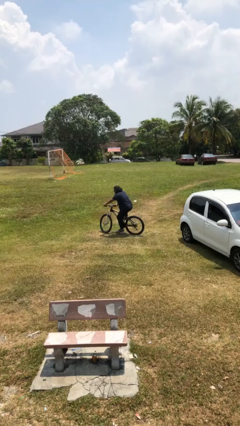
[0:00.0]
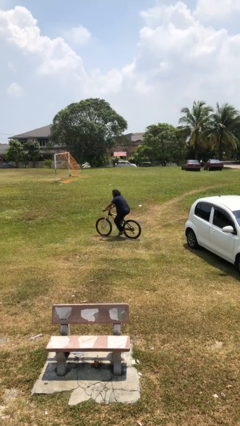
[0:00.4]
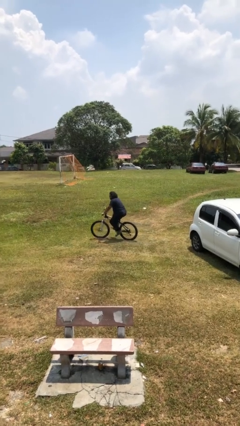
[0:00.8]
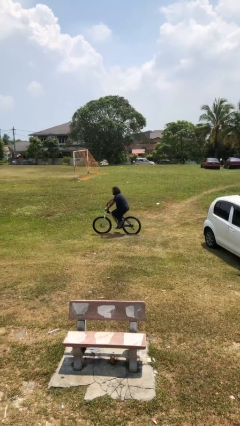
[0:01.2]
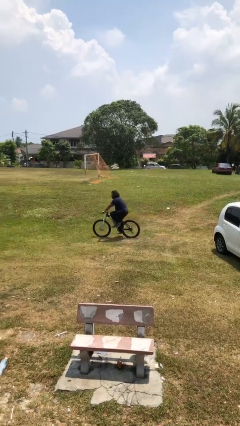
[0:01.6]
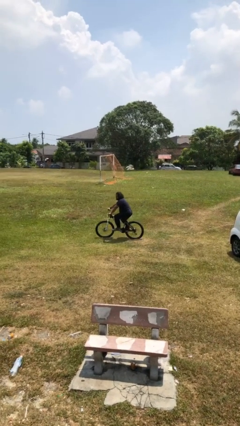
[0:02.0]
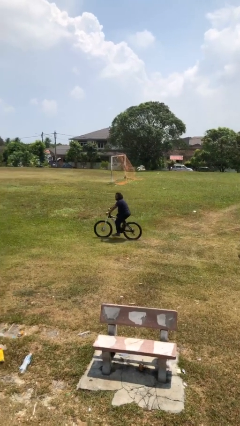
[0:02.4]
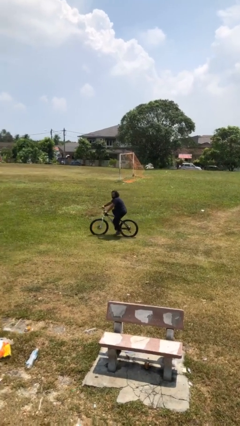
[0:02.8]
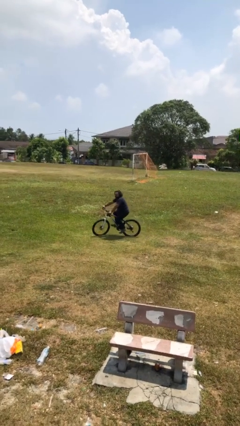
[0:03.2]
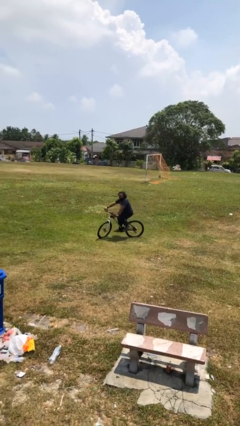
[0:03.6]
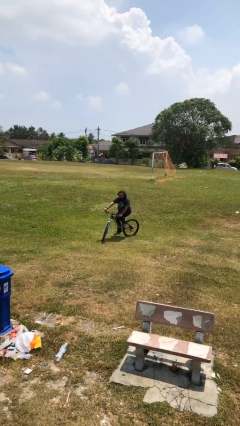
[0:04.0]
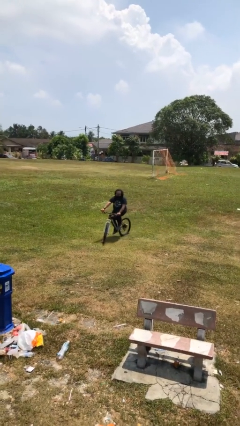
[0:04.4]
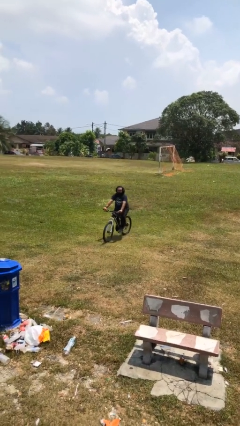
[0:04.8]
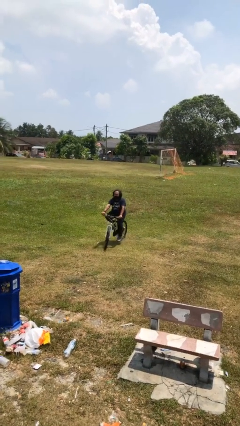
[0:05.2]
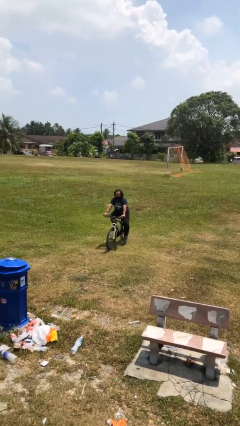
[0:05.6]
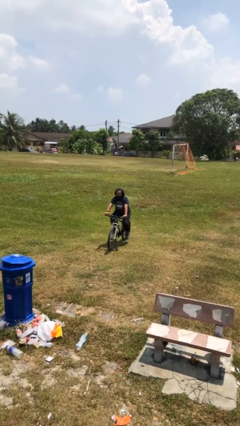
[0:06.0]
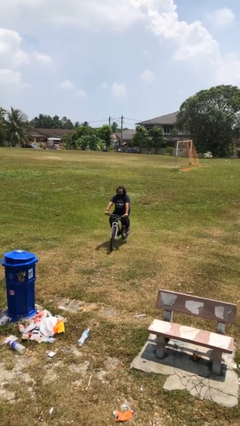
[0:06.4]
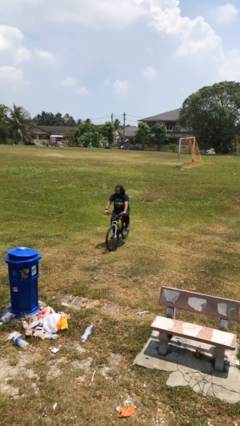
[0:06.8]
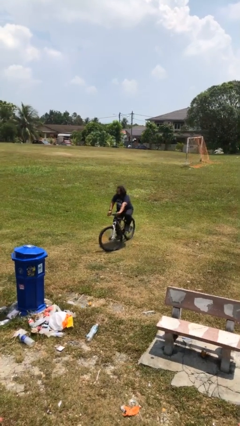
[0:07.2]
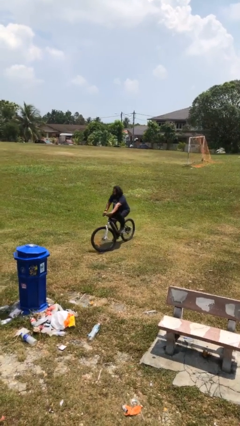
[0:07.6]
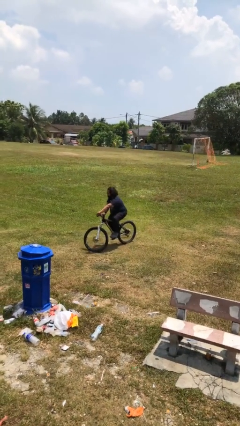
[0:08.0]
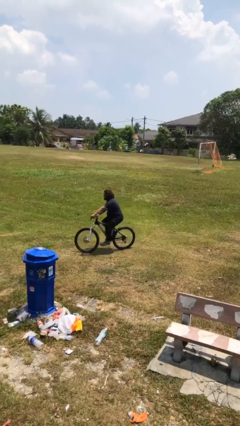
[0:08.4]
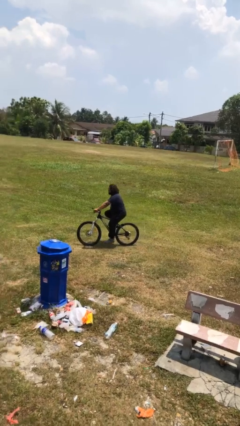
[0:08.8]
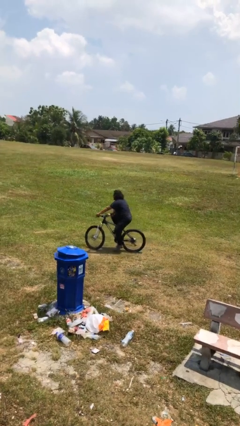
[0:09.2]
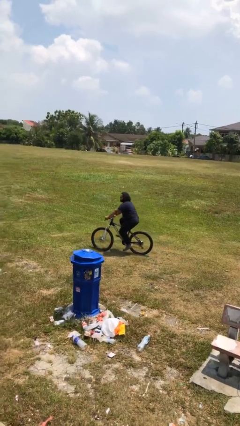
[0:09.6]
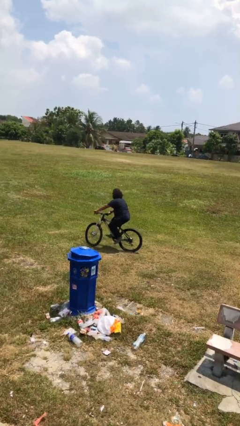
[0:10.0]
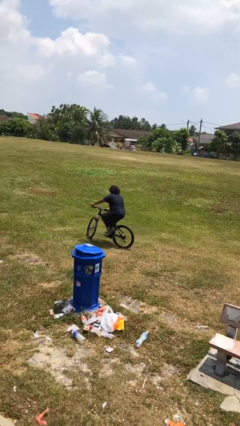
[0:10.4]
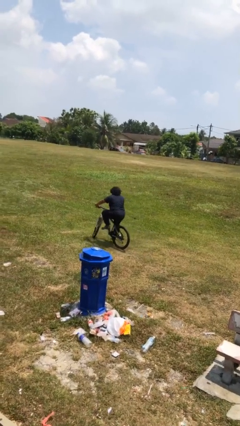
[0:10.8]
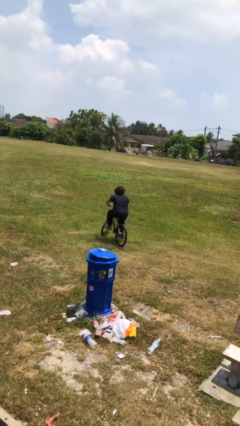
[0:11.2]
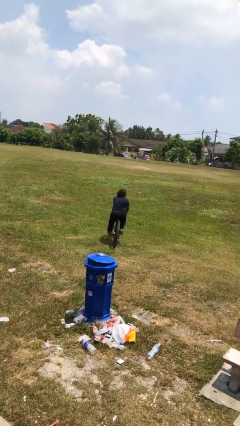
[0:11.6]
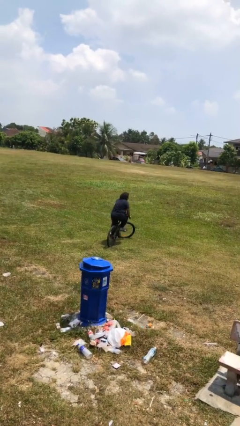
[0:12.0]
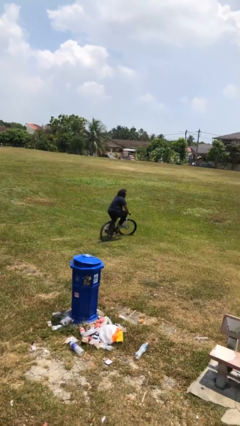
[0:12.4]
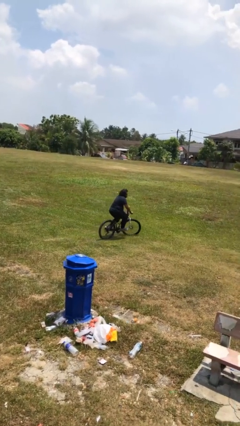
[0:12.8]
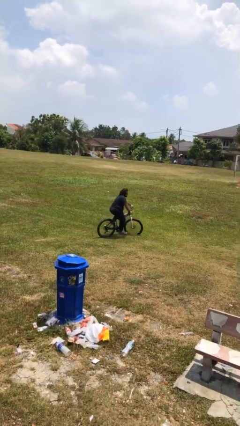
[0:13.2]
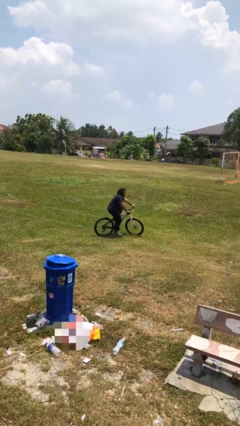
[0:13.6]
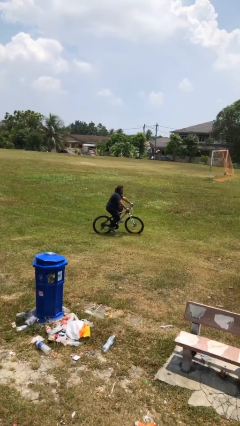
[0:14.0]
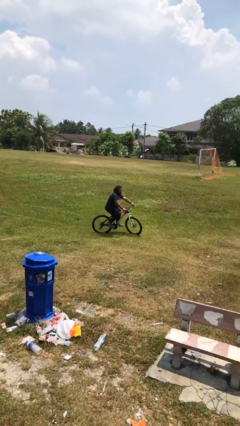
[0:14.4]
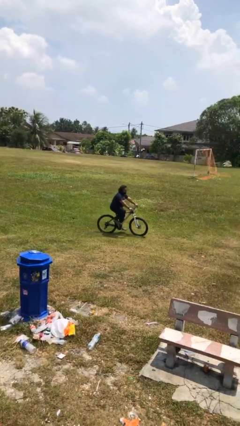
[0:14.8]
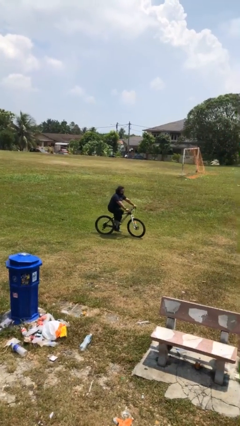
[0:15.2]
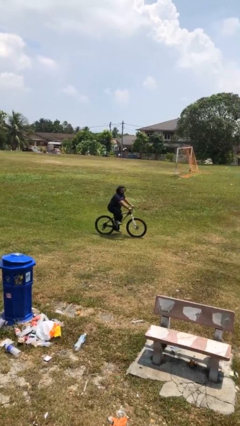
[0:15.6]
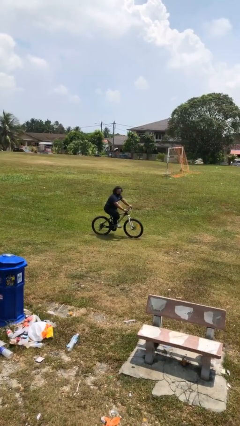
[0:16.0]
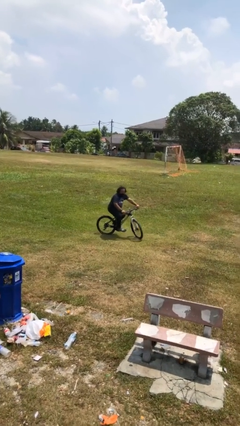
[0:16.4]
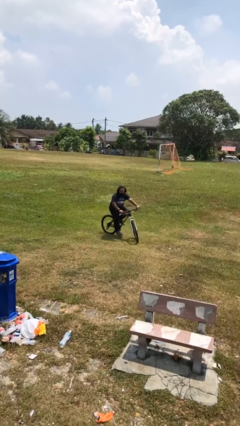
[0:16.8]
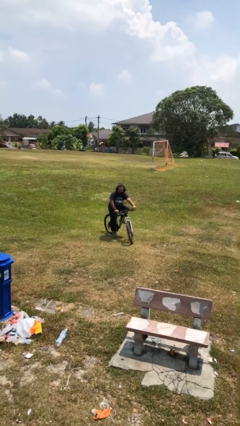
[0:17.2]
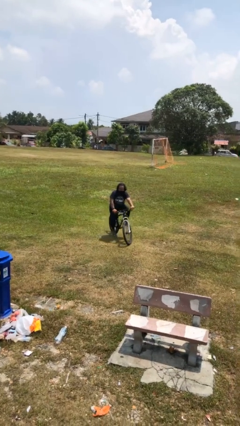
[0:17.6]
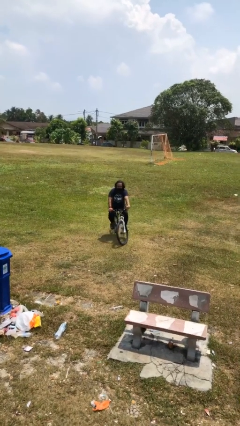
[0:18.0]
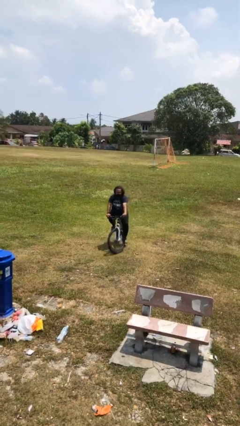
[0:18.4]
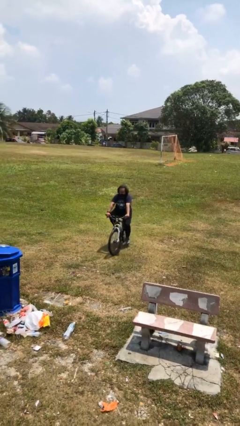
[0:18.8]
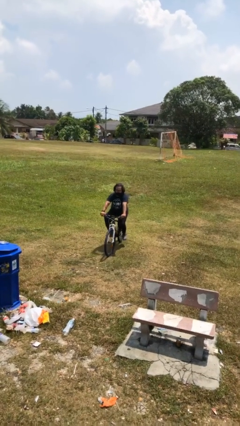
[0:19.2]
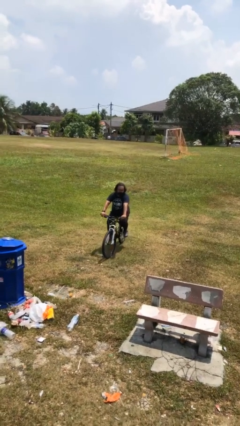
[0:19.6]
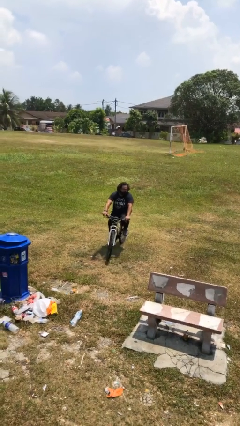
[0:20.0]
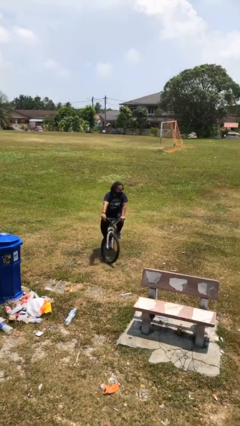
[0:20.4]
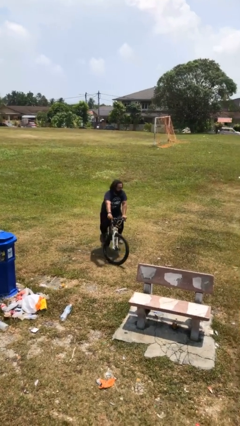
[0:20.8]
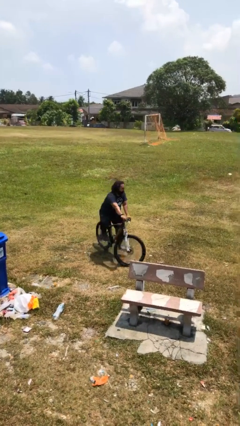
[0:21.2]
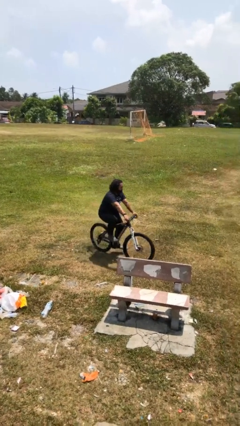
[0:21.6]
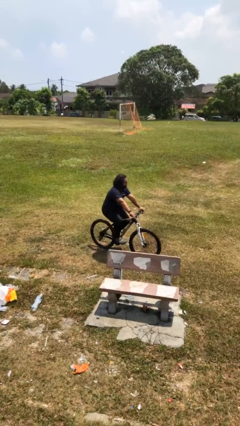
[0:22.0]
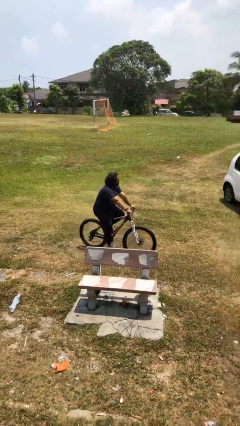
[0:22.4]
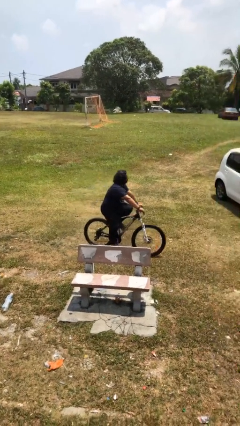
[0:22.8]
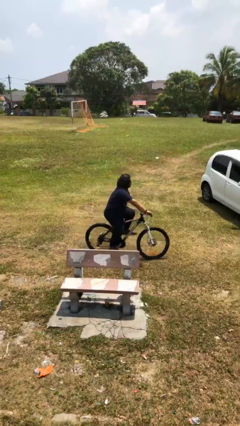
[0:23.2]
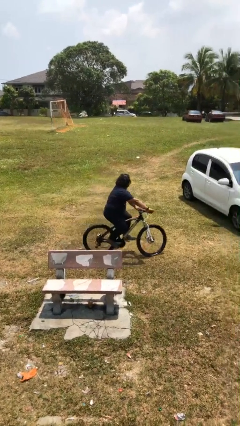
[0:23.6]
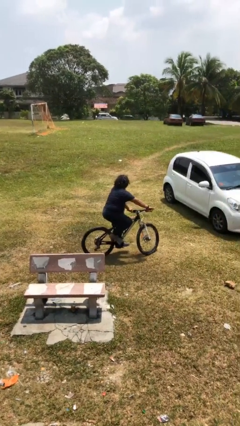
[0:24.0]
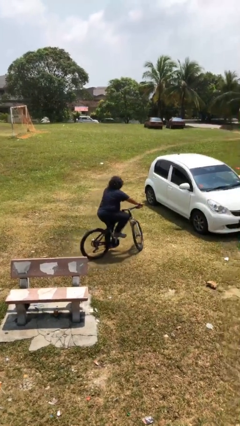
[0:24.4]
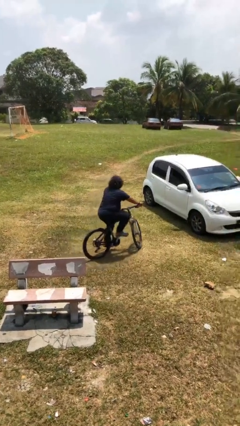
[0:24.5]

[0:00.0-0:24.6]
person rides bicycle

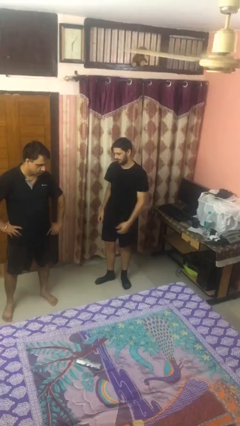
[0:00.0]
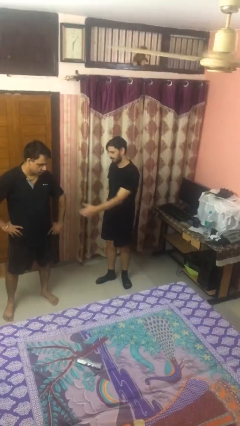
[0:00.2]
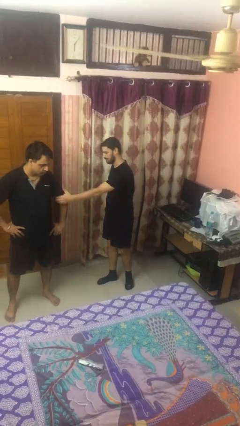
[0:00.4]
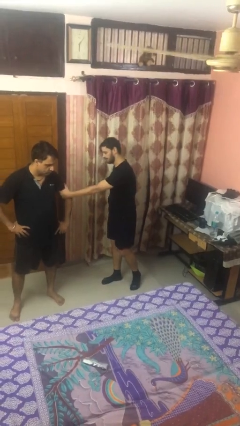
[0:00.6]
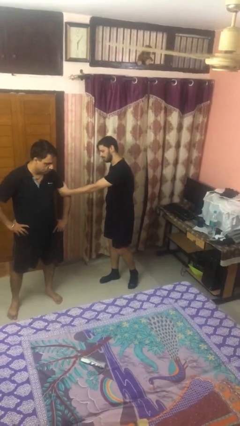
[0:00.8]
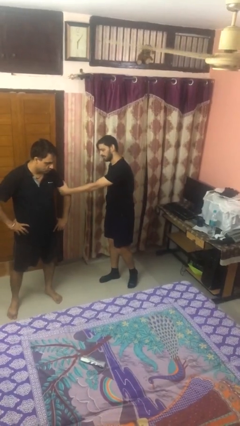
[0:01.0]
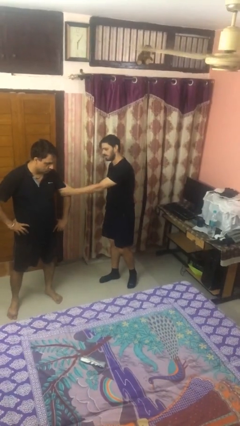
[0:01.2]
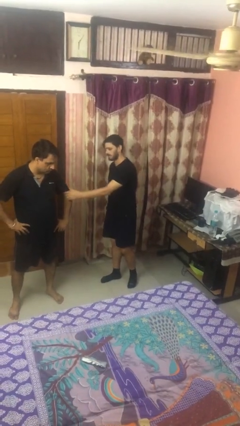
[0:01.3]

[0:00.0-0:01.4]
person grabs person by bicep

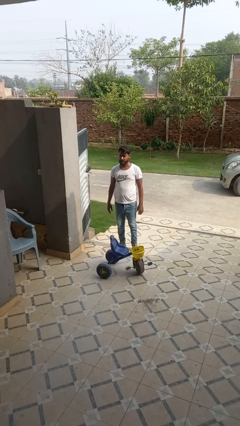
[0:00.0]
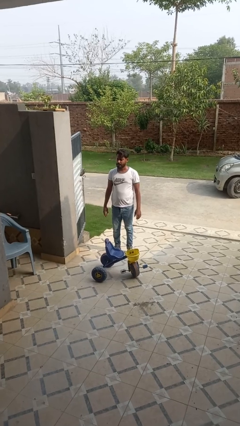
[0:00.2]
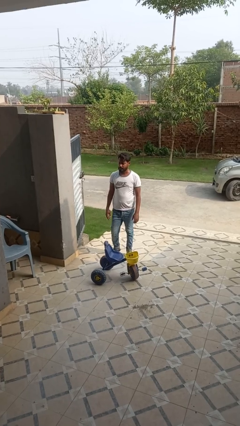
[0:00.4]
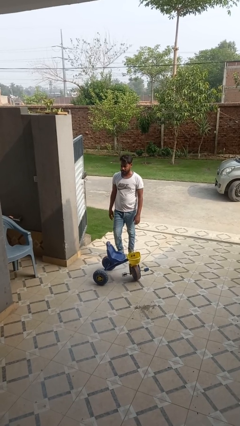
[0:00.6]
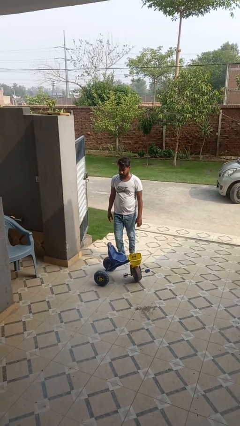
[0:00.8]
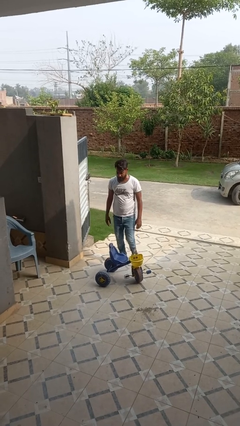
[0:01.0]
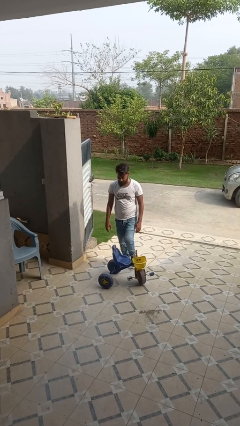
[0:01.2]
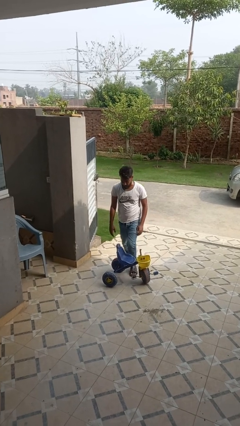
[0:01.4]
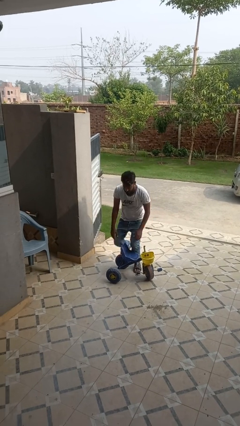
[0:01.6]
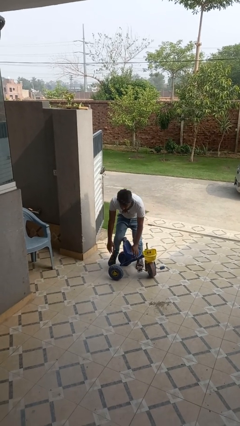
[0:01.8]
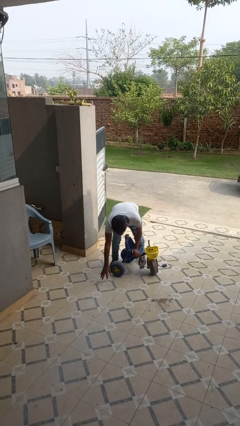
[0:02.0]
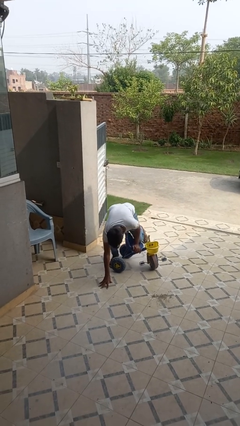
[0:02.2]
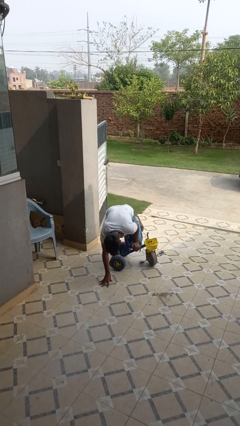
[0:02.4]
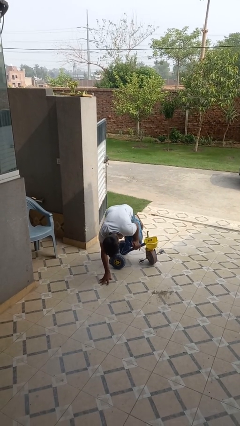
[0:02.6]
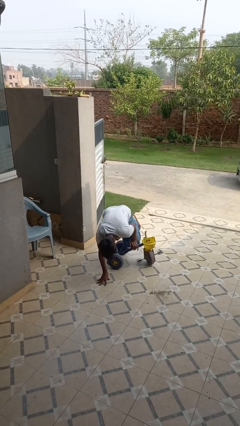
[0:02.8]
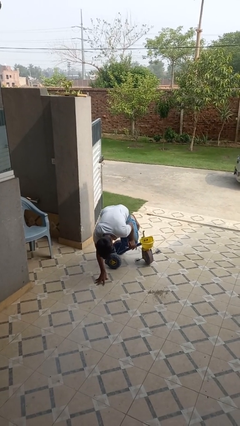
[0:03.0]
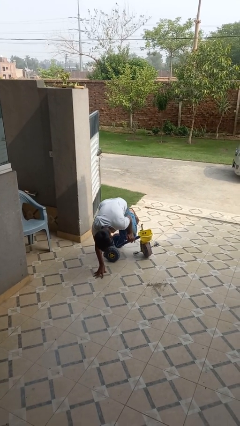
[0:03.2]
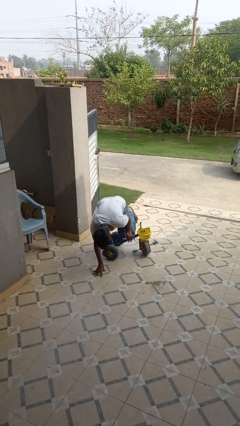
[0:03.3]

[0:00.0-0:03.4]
person trips on object on floor

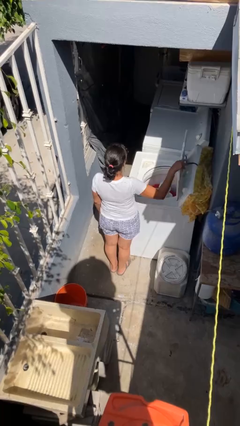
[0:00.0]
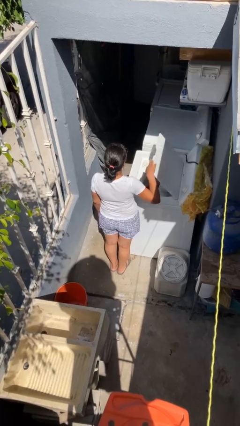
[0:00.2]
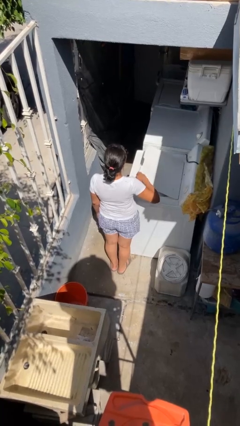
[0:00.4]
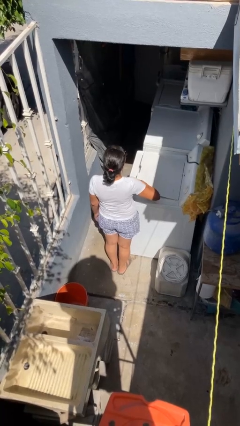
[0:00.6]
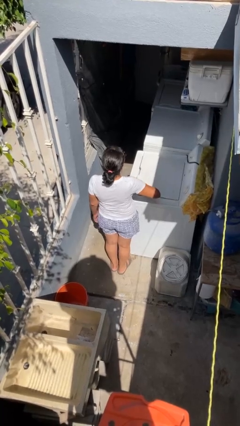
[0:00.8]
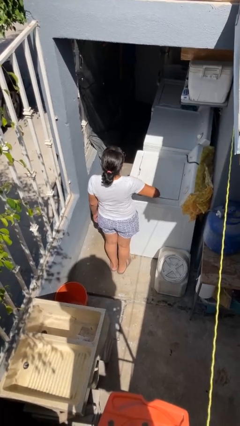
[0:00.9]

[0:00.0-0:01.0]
person closes clothes washer
